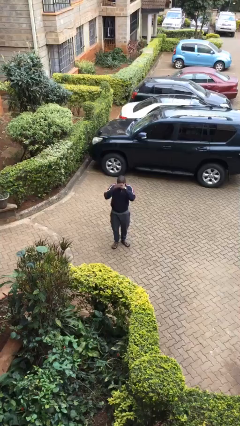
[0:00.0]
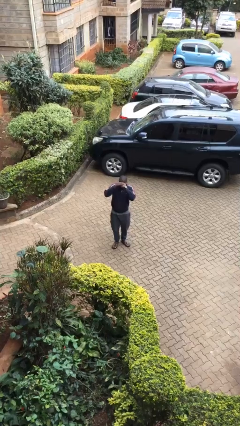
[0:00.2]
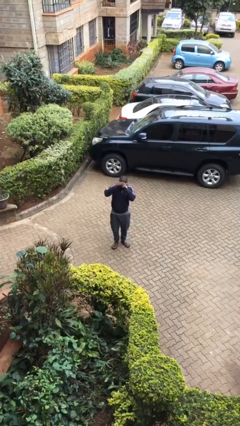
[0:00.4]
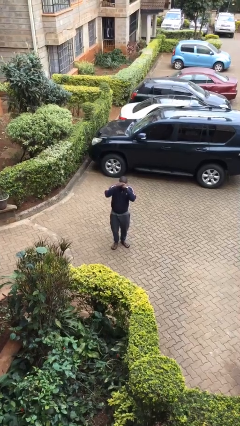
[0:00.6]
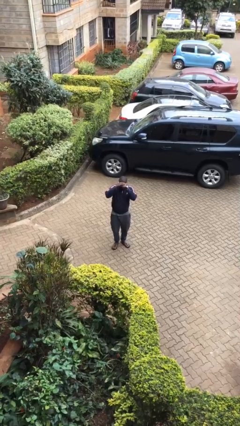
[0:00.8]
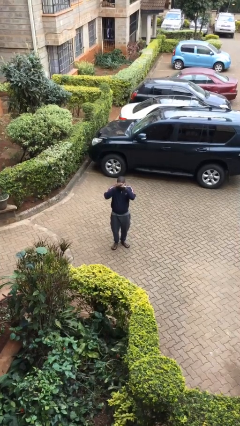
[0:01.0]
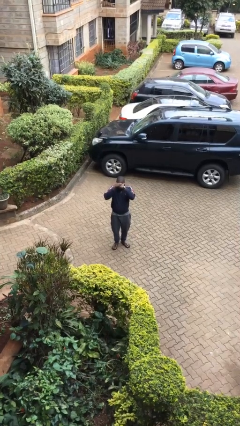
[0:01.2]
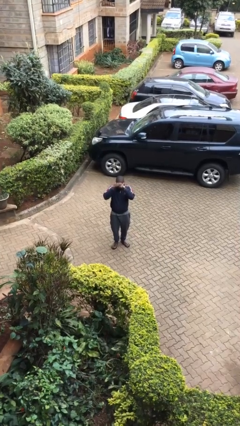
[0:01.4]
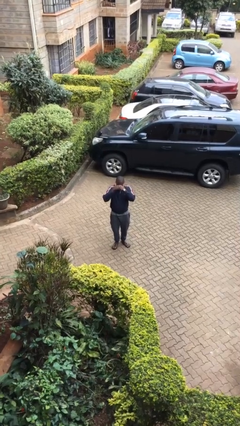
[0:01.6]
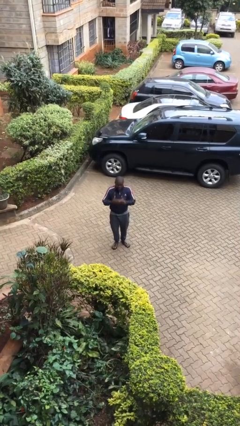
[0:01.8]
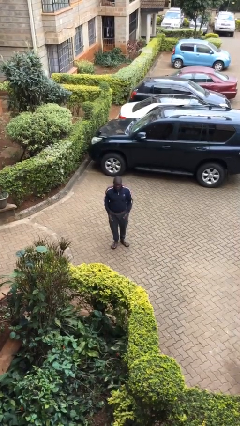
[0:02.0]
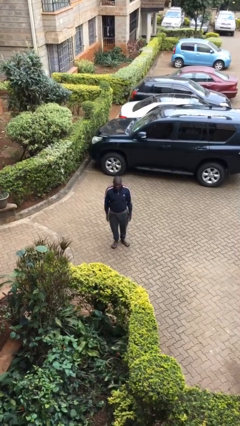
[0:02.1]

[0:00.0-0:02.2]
person shades eyes

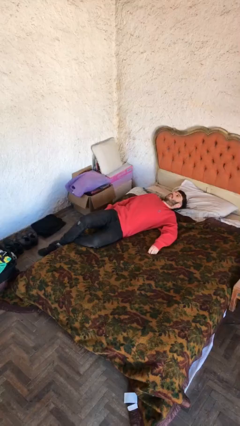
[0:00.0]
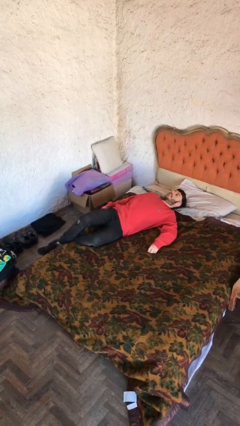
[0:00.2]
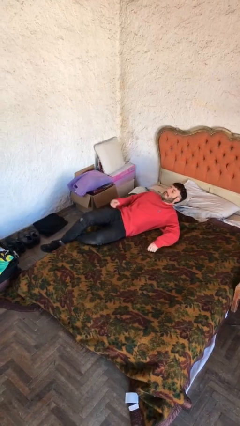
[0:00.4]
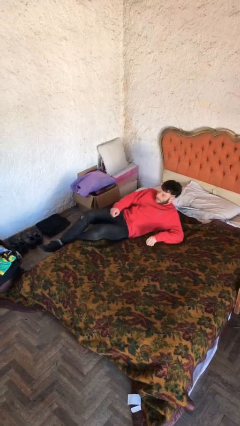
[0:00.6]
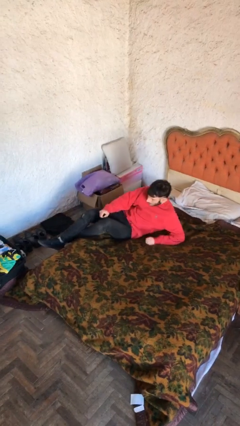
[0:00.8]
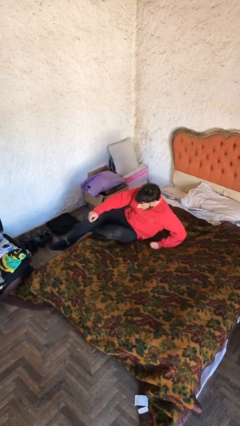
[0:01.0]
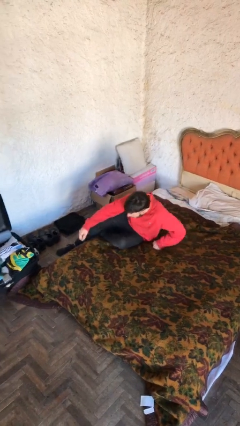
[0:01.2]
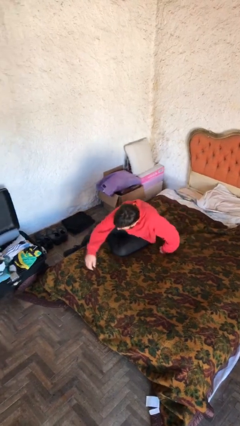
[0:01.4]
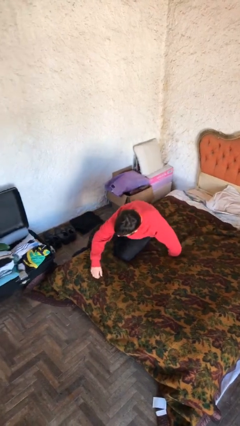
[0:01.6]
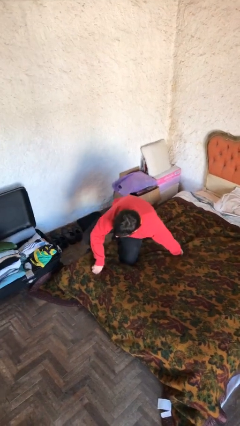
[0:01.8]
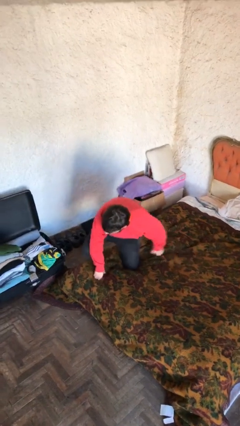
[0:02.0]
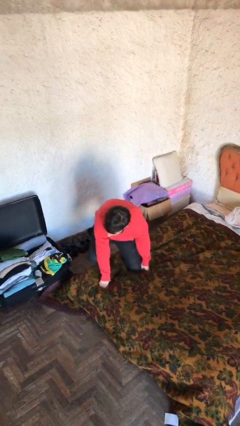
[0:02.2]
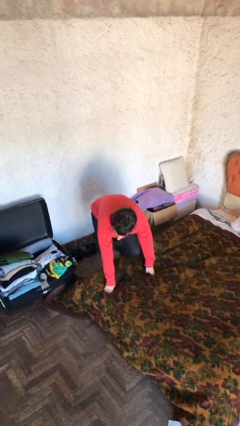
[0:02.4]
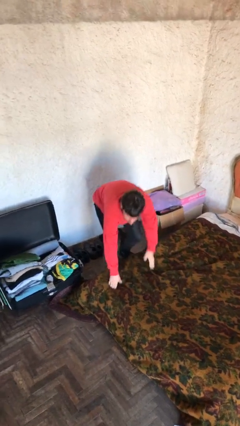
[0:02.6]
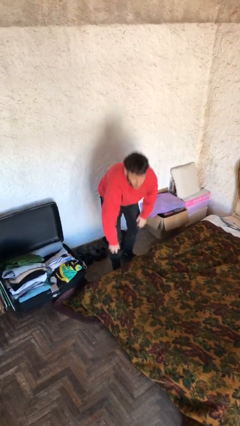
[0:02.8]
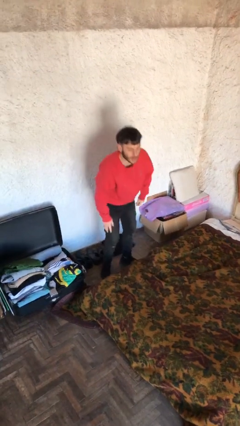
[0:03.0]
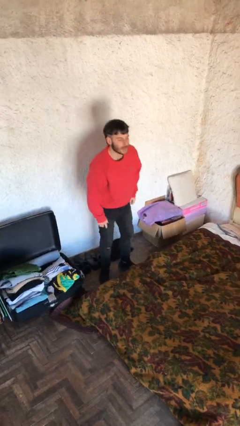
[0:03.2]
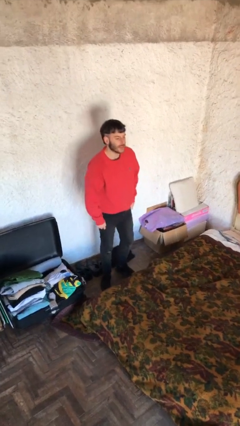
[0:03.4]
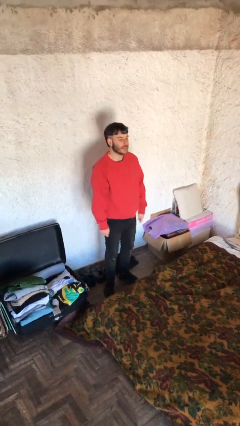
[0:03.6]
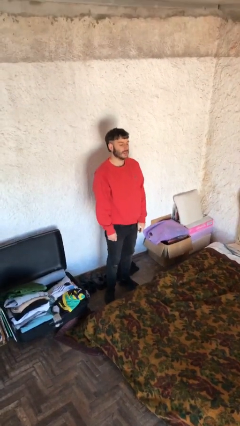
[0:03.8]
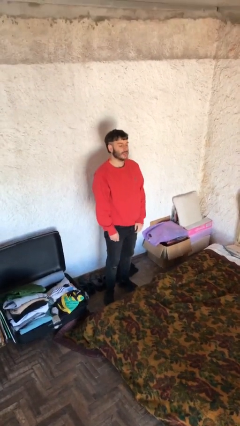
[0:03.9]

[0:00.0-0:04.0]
person stands up

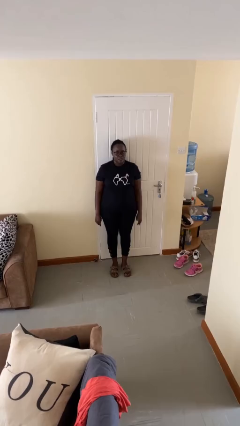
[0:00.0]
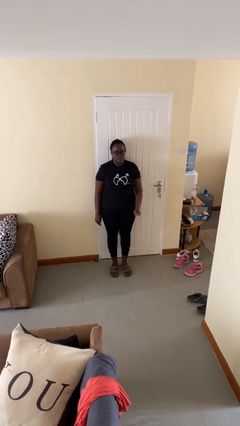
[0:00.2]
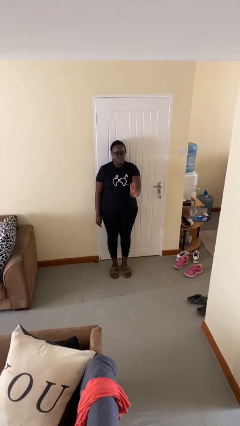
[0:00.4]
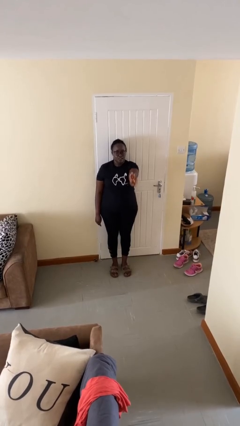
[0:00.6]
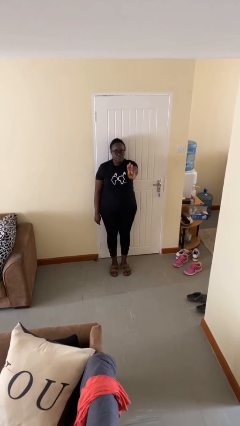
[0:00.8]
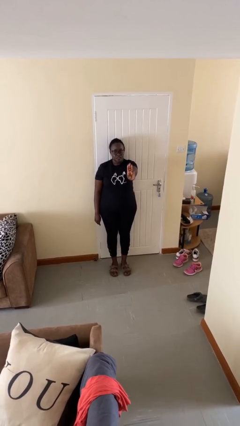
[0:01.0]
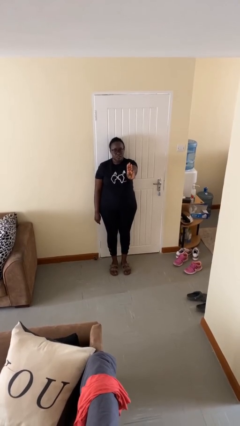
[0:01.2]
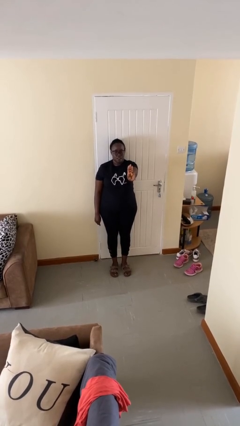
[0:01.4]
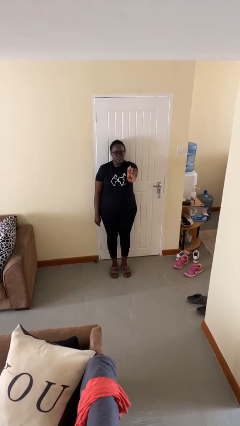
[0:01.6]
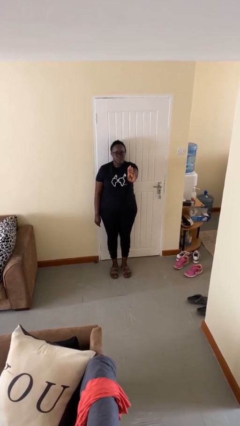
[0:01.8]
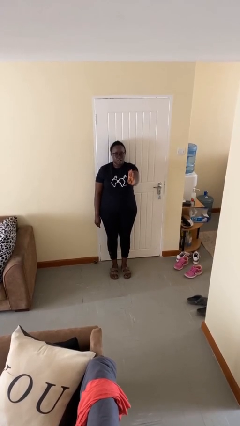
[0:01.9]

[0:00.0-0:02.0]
person gestures number three

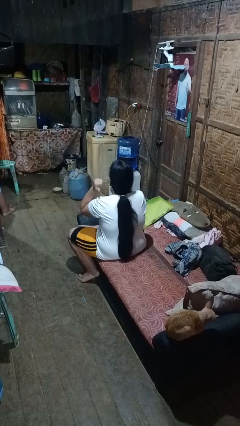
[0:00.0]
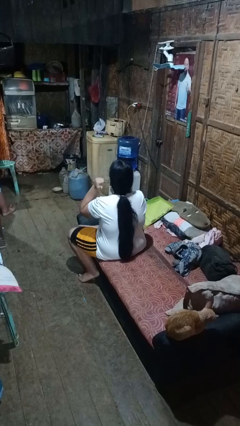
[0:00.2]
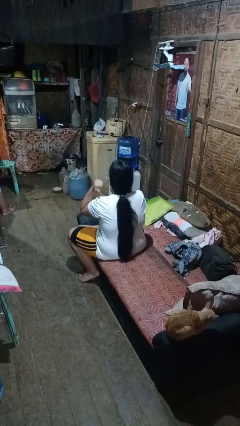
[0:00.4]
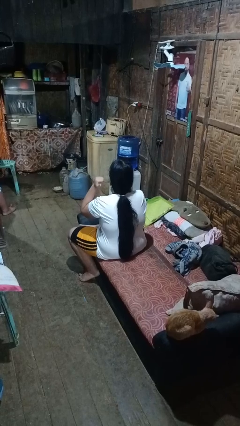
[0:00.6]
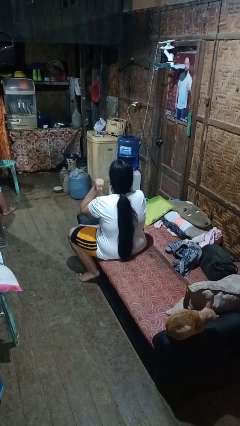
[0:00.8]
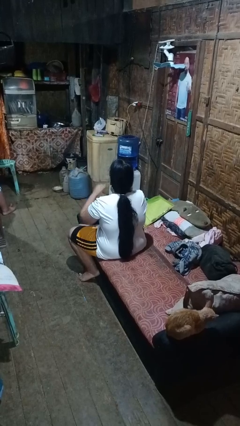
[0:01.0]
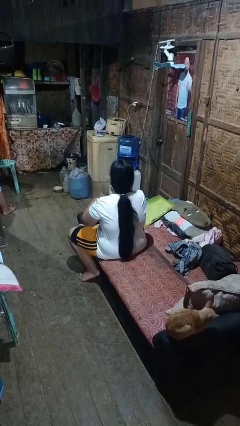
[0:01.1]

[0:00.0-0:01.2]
person gestures behind me

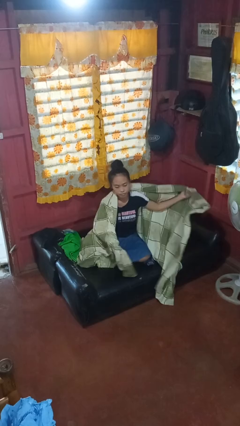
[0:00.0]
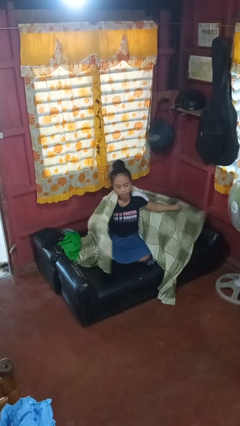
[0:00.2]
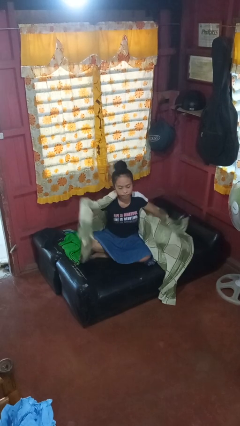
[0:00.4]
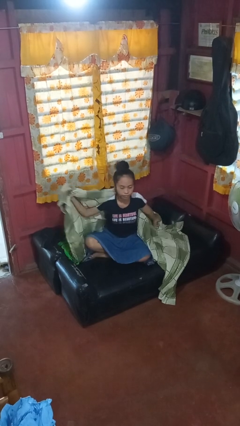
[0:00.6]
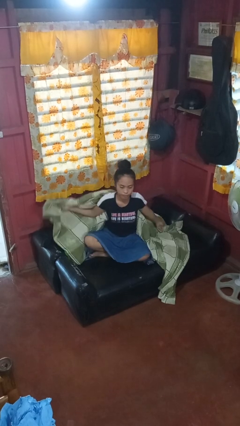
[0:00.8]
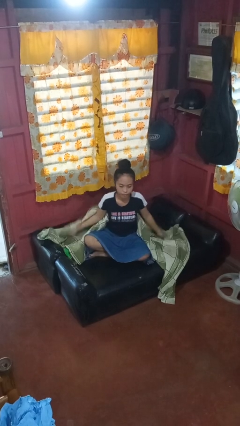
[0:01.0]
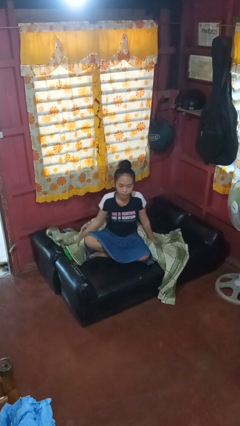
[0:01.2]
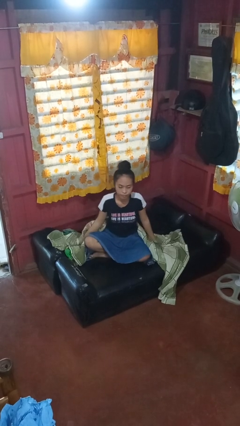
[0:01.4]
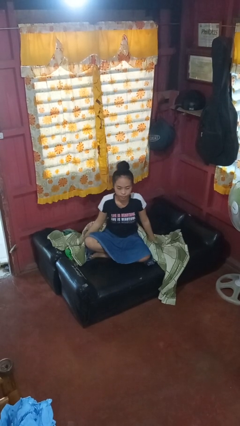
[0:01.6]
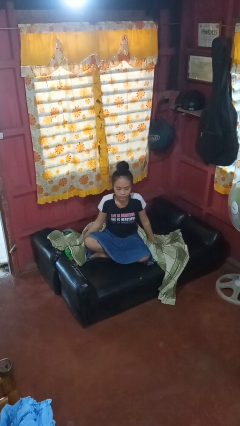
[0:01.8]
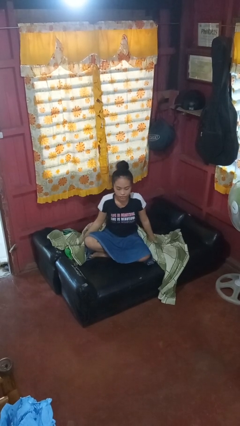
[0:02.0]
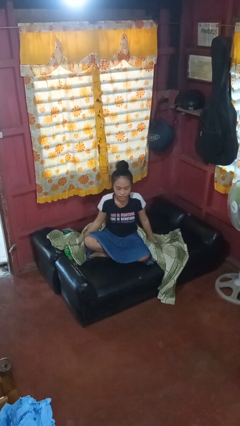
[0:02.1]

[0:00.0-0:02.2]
person uncovers with blanket

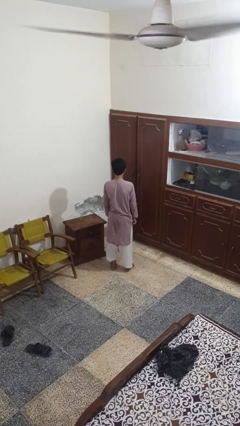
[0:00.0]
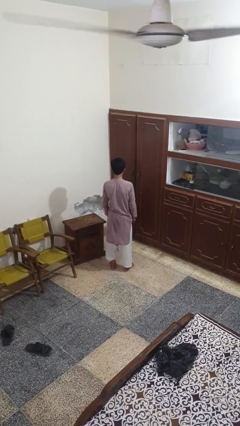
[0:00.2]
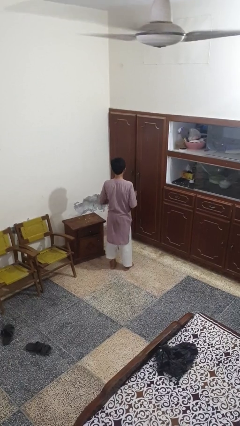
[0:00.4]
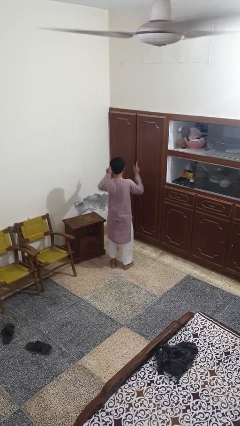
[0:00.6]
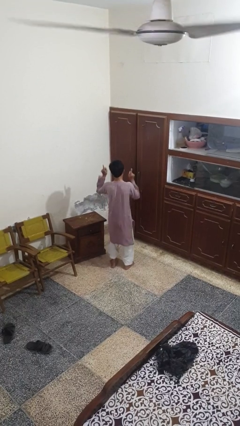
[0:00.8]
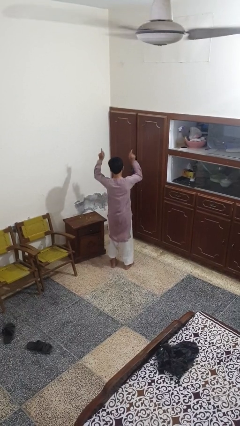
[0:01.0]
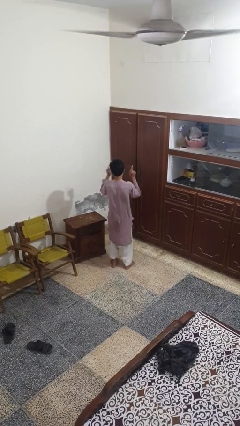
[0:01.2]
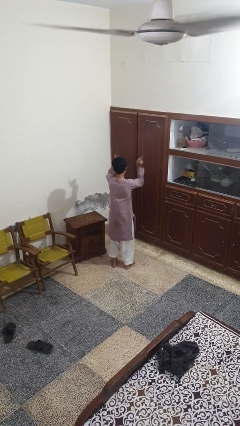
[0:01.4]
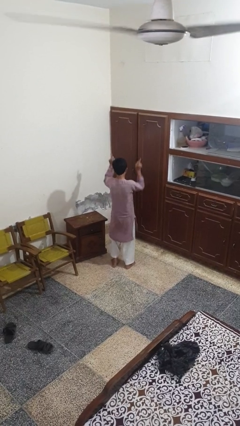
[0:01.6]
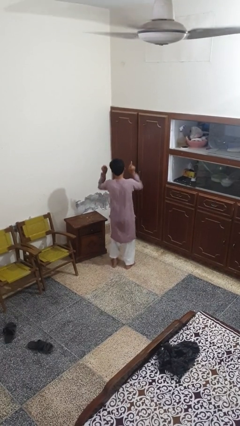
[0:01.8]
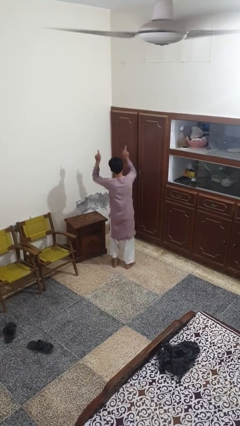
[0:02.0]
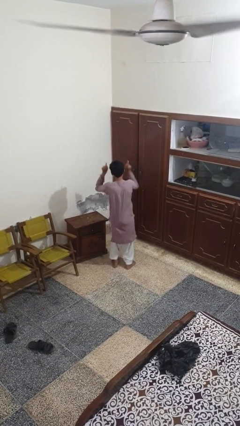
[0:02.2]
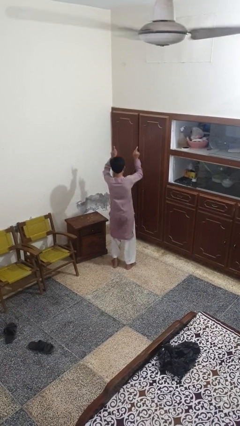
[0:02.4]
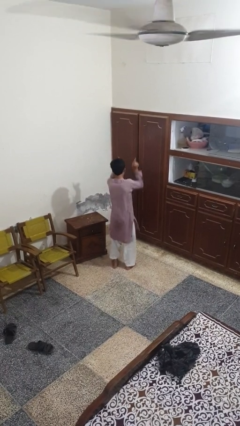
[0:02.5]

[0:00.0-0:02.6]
person dances in place

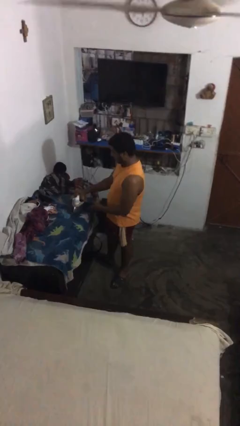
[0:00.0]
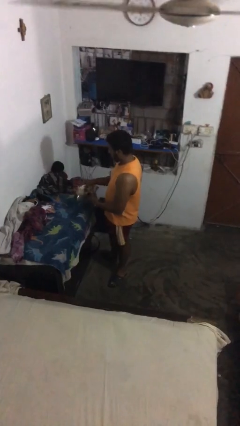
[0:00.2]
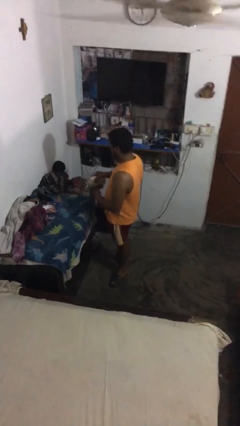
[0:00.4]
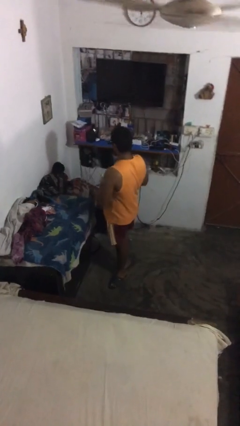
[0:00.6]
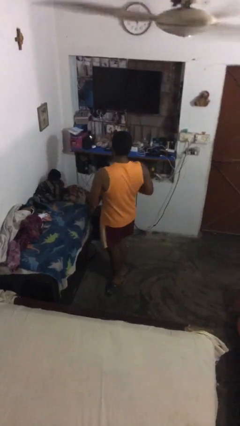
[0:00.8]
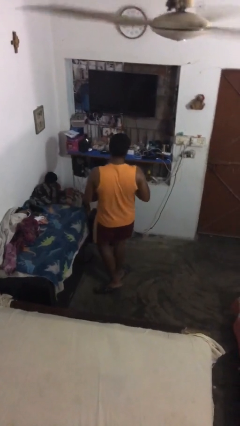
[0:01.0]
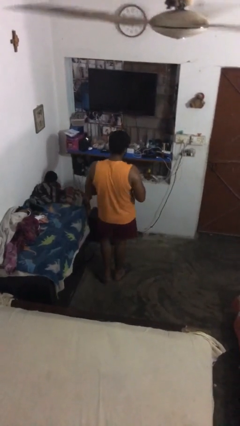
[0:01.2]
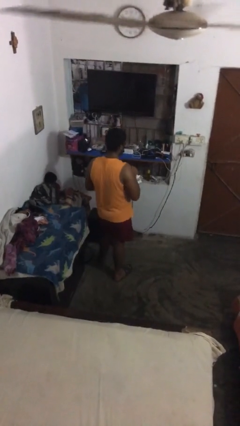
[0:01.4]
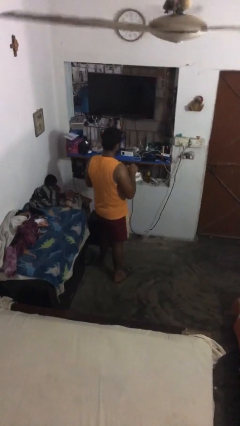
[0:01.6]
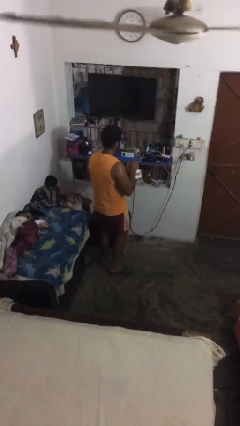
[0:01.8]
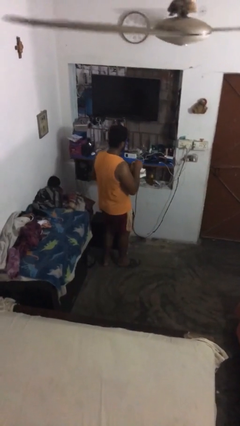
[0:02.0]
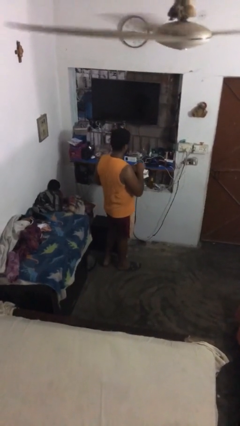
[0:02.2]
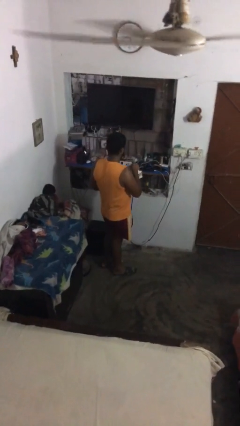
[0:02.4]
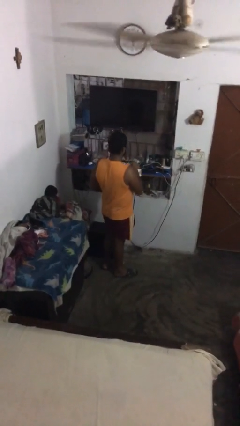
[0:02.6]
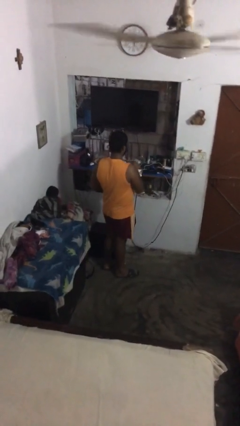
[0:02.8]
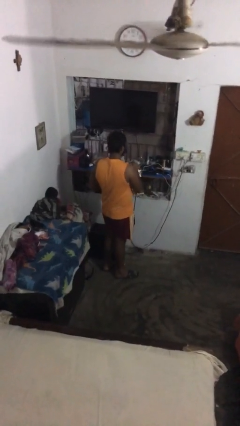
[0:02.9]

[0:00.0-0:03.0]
person picks up object from table
